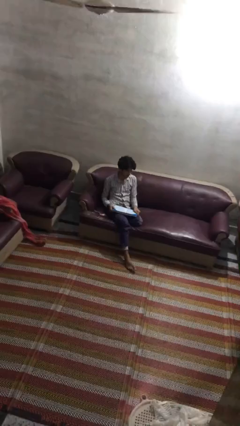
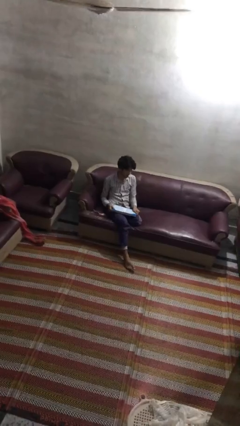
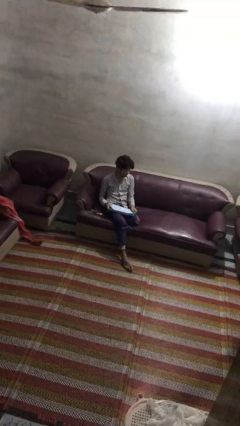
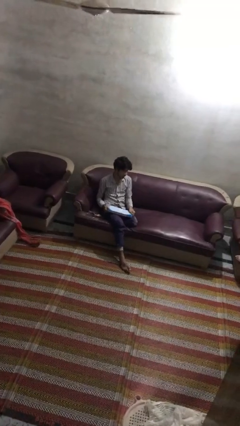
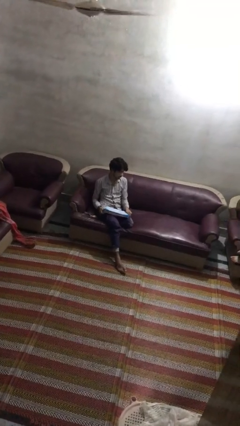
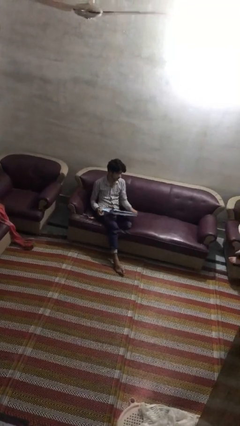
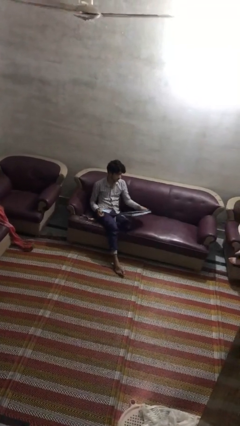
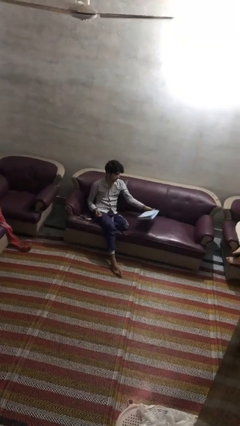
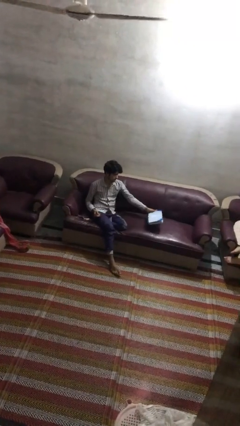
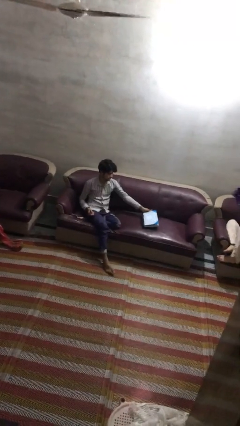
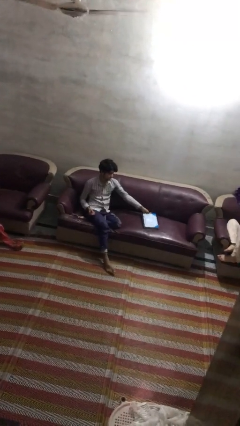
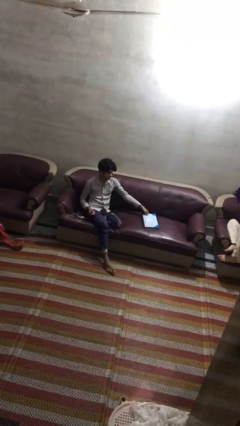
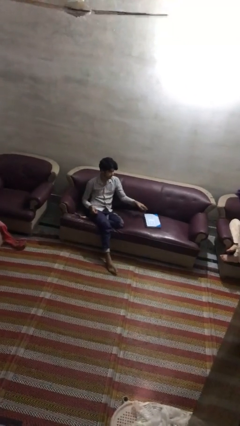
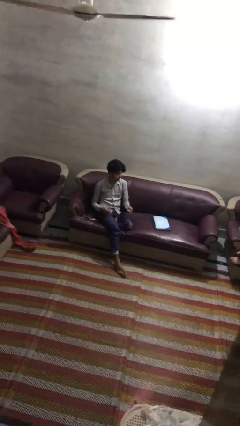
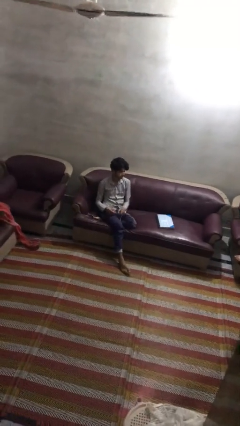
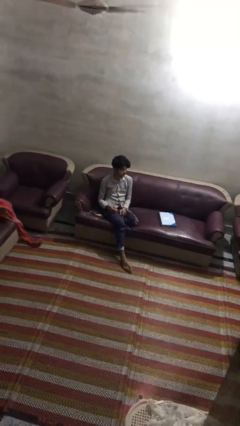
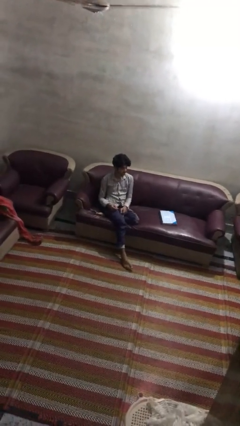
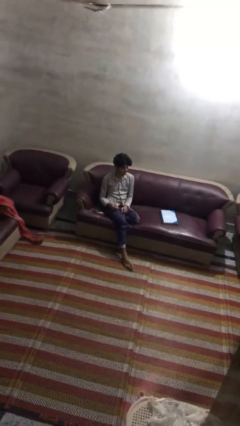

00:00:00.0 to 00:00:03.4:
person puts down object on couch

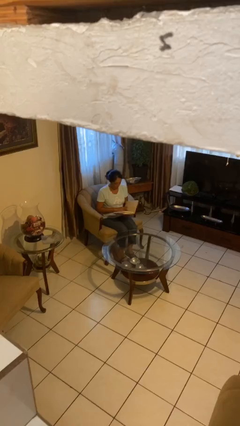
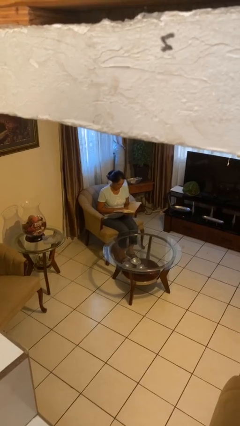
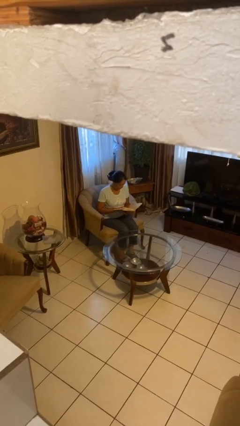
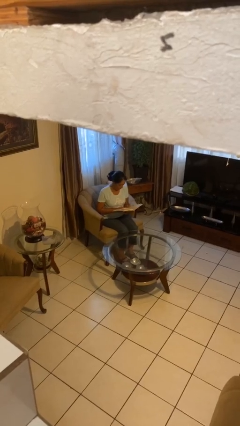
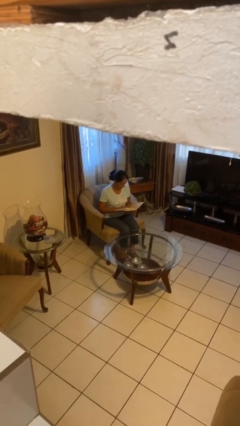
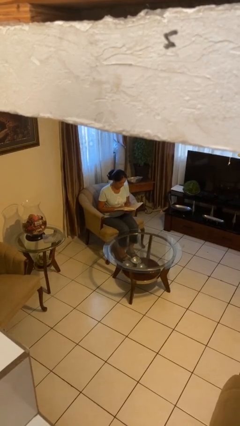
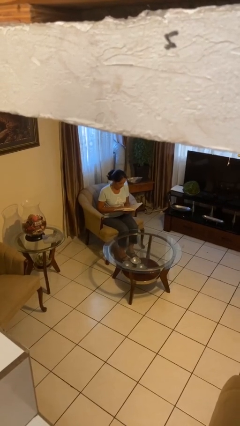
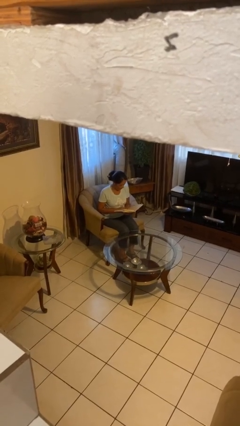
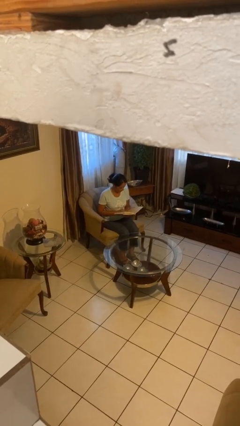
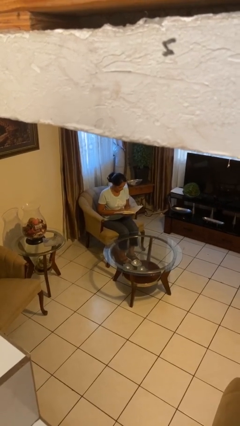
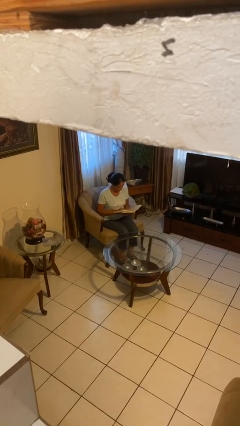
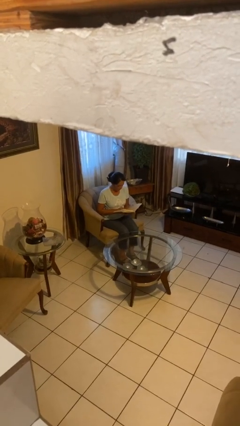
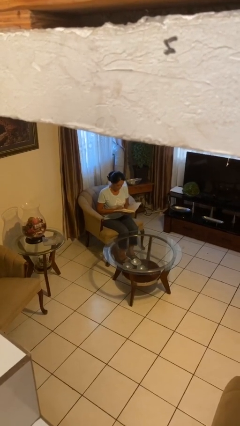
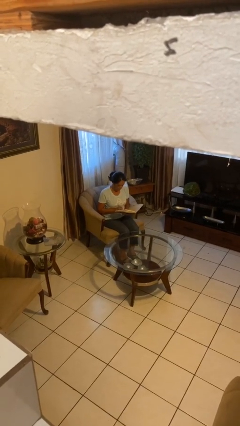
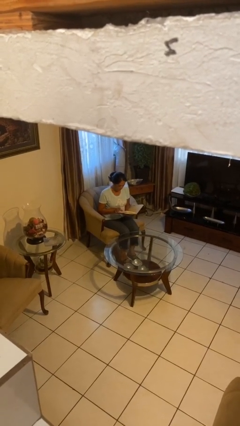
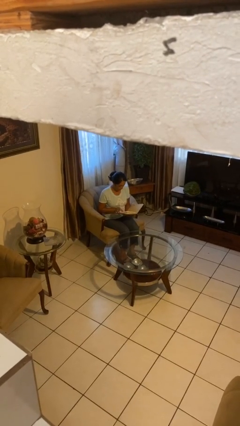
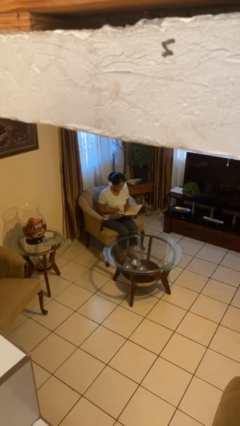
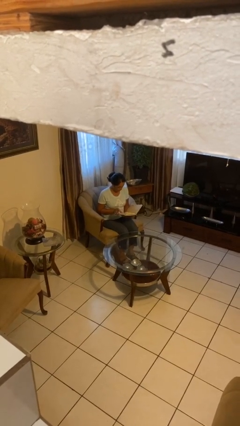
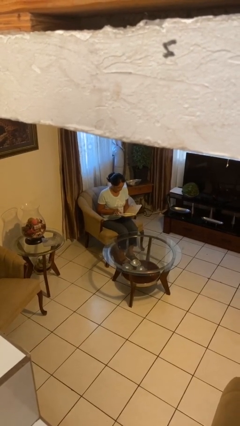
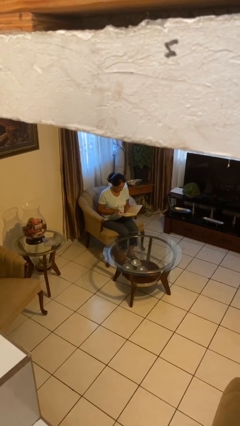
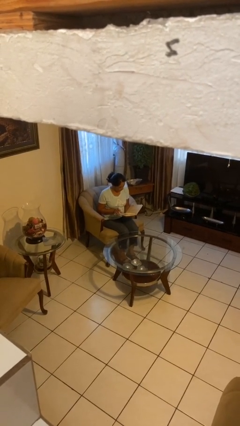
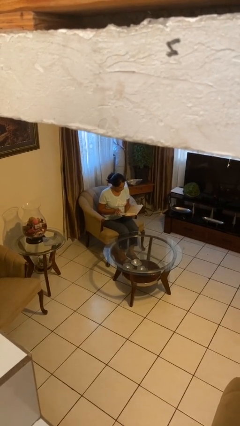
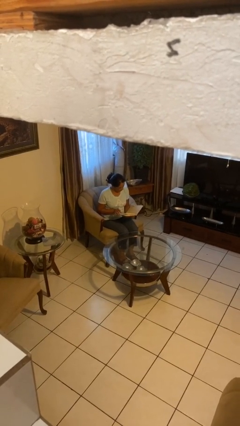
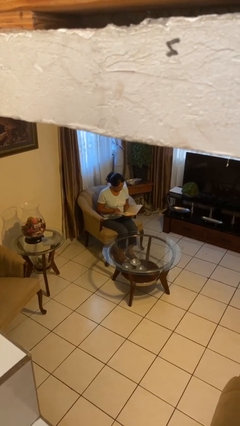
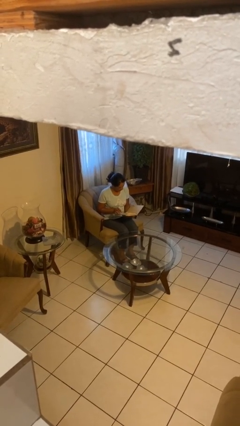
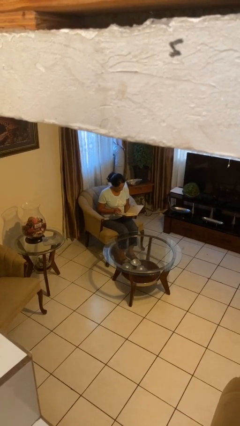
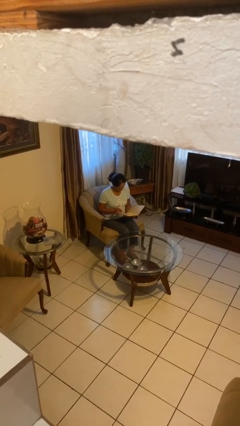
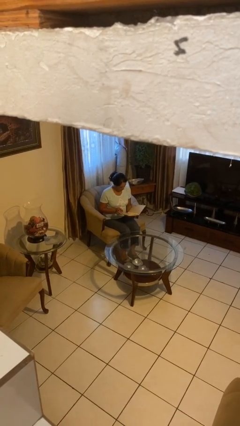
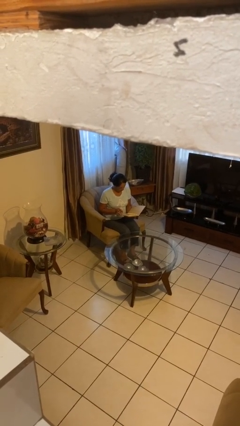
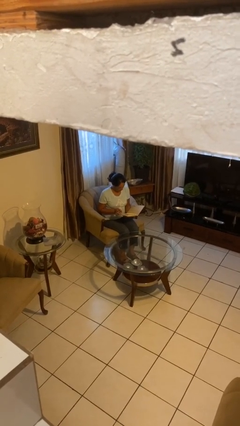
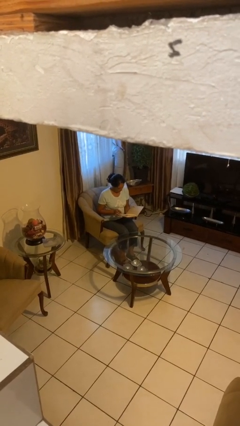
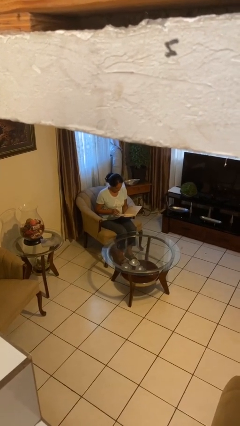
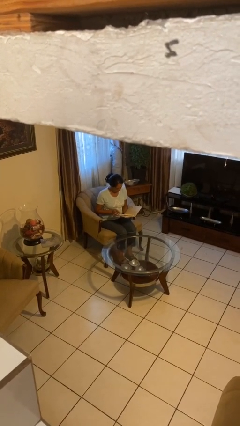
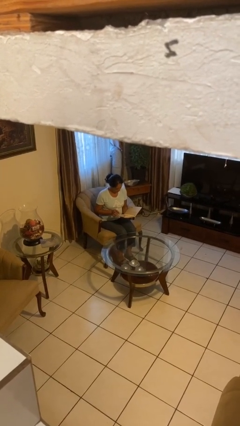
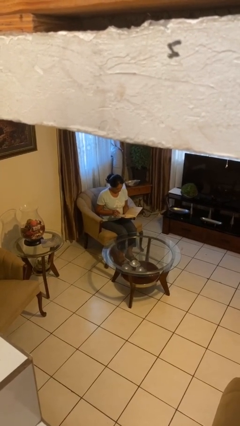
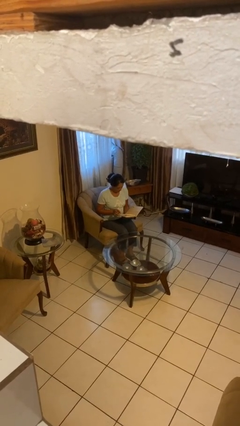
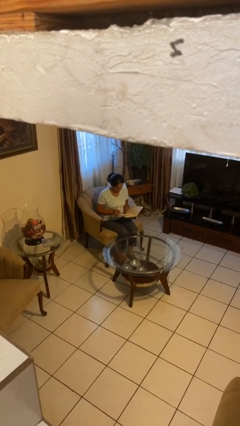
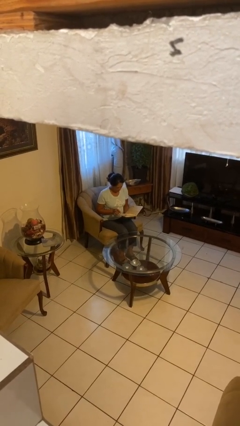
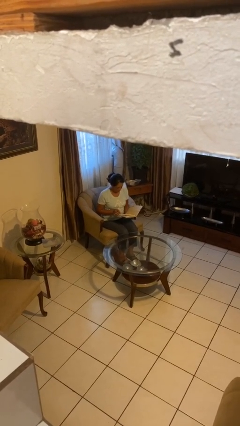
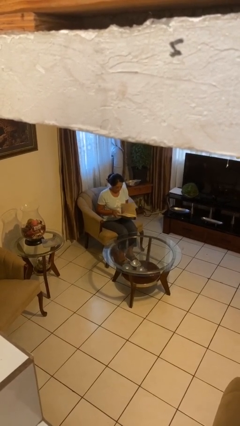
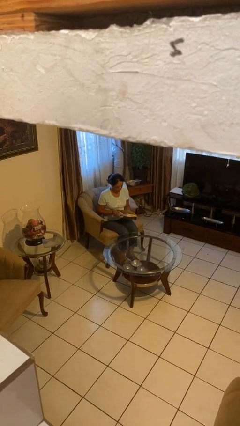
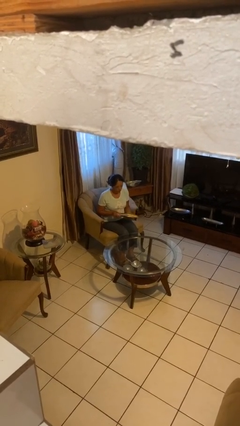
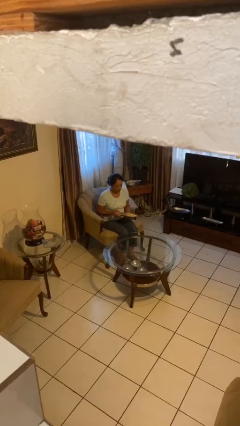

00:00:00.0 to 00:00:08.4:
person reads document

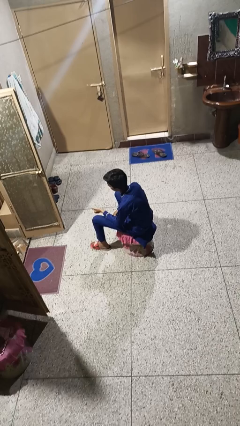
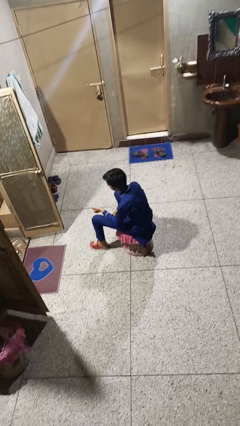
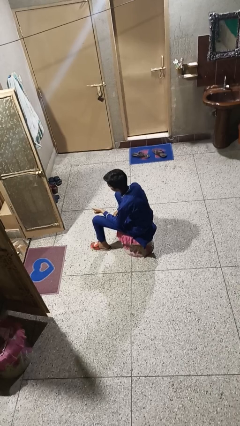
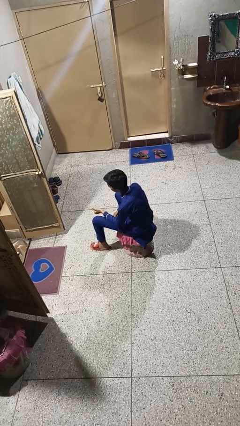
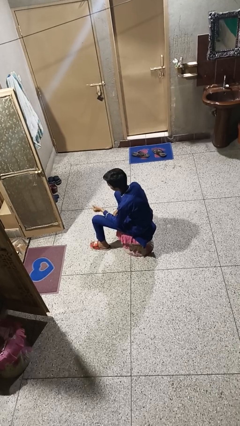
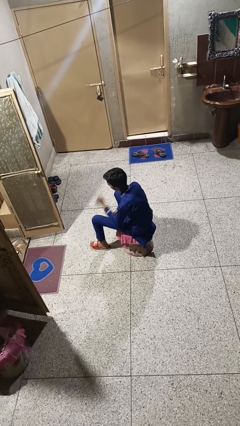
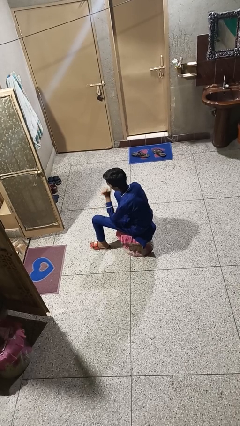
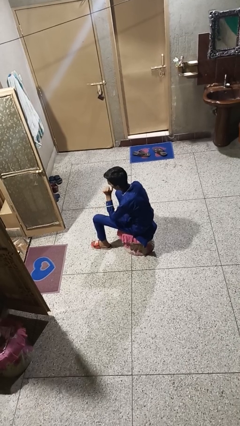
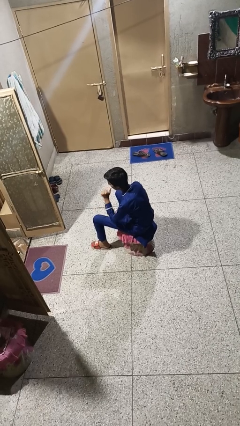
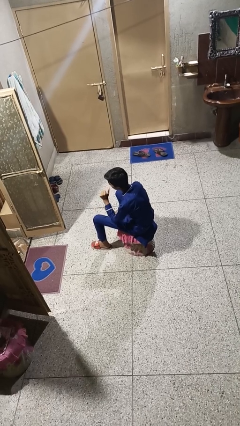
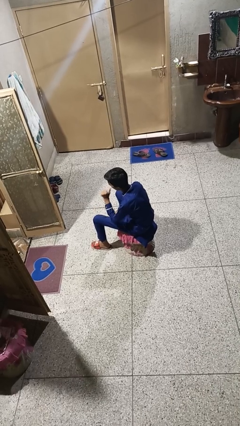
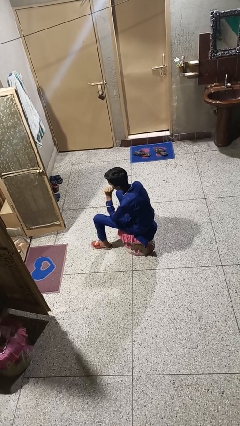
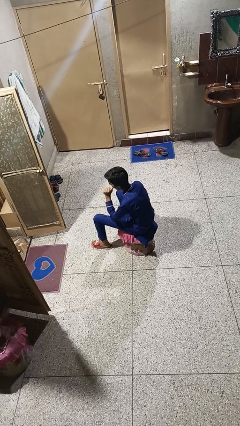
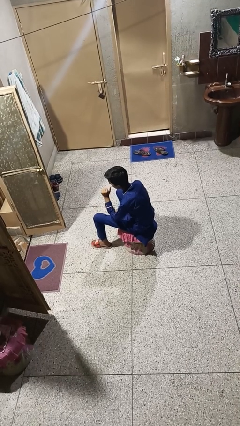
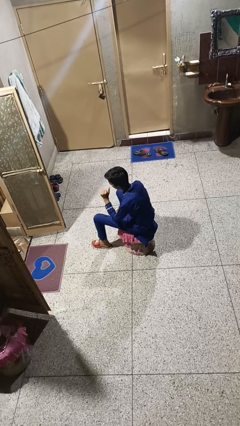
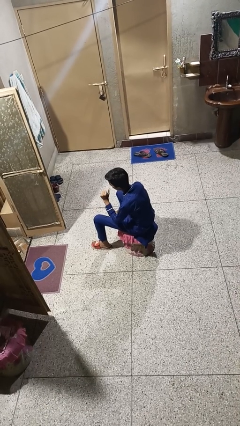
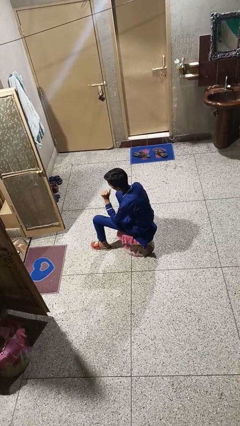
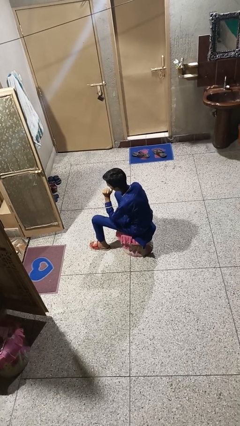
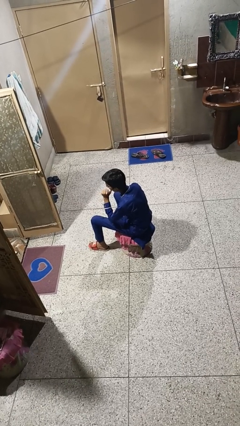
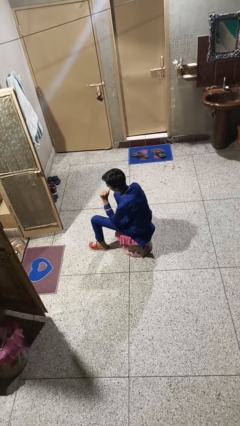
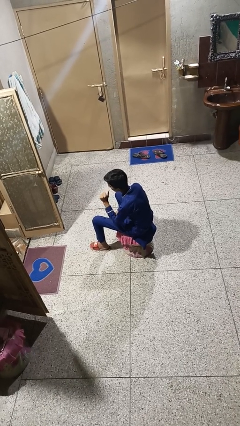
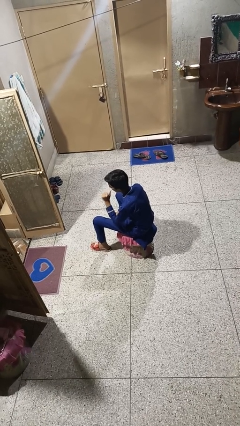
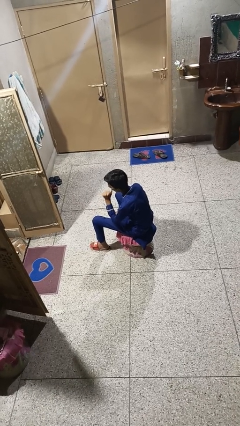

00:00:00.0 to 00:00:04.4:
person licks fingers

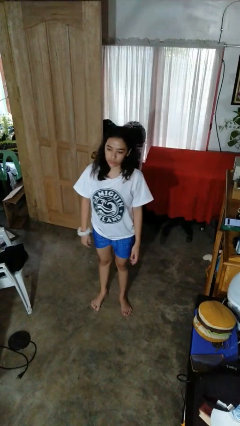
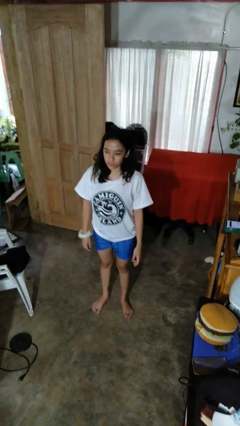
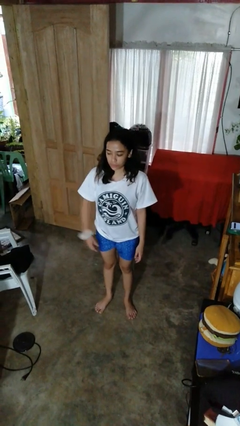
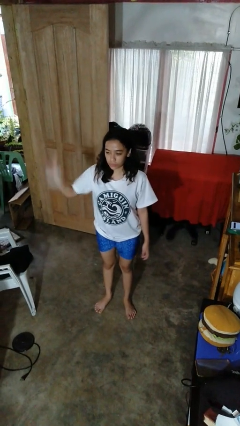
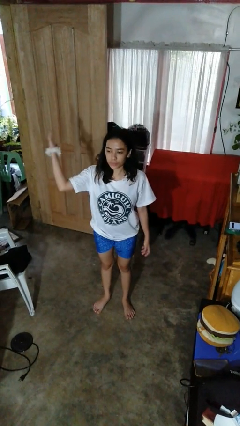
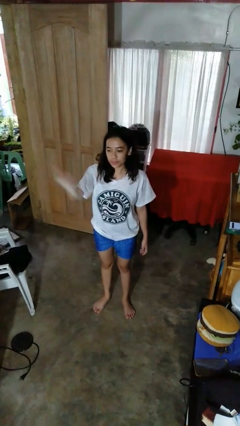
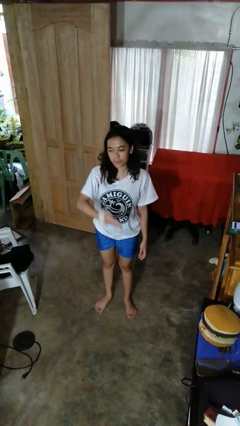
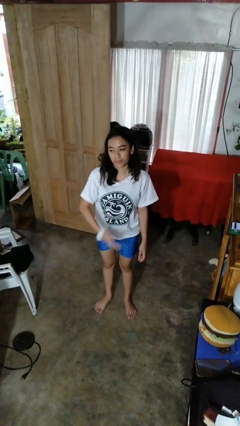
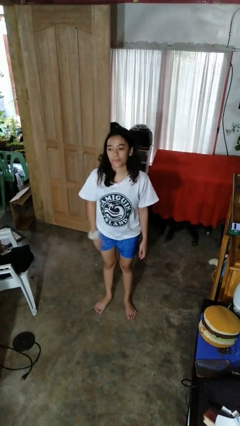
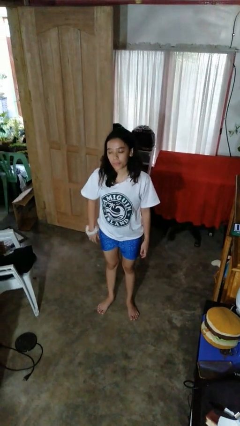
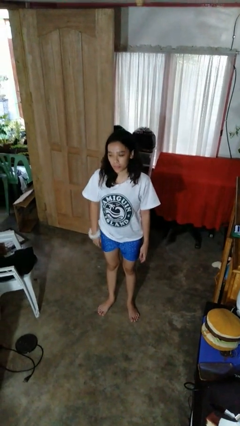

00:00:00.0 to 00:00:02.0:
person karate chop
